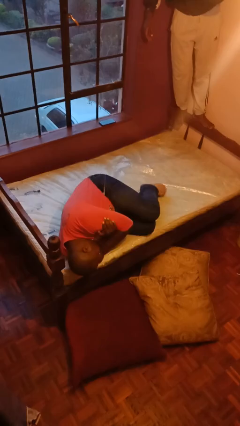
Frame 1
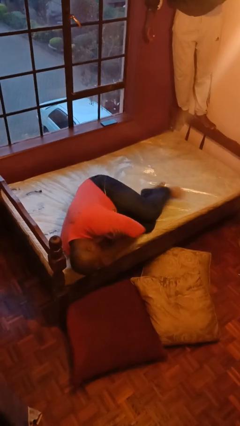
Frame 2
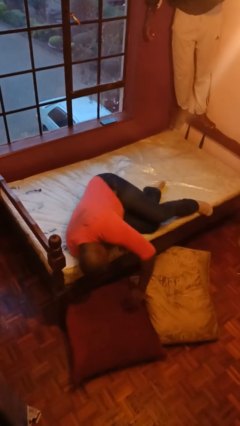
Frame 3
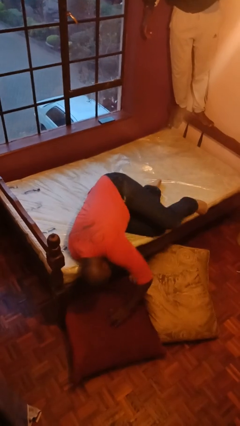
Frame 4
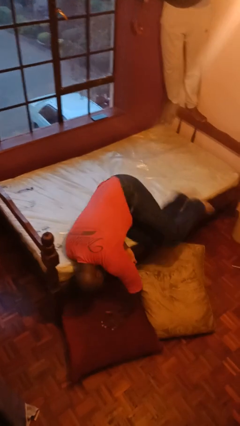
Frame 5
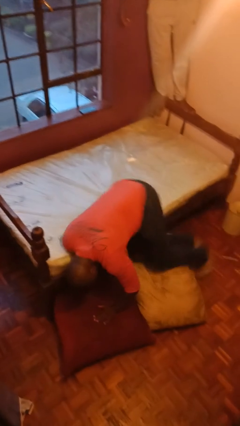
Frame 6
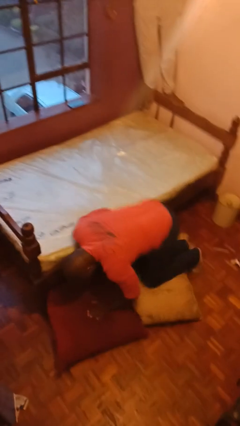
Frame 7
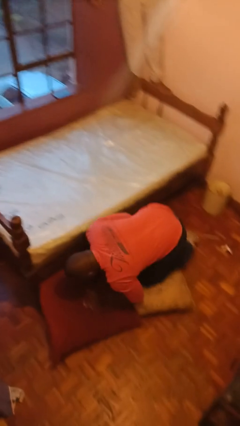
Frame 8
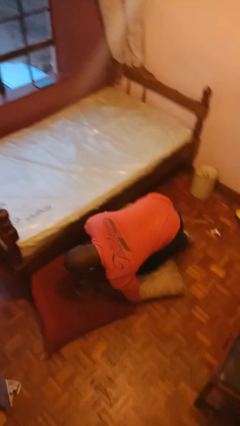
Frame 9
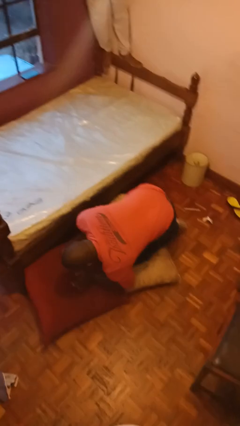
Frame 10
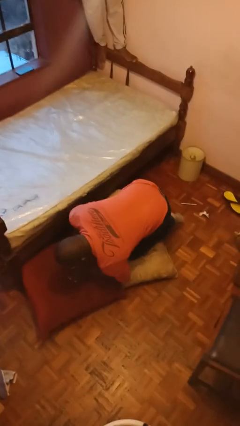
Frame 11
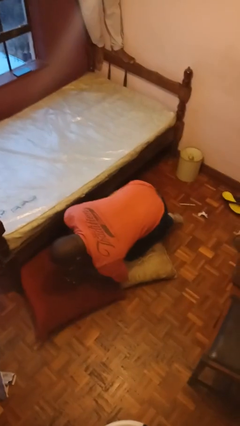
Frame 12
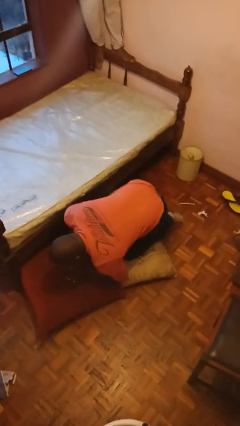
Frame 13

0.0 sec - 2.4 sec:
person falls from bed

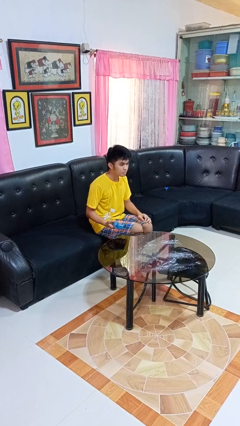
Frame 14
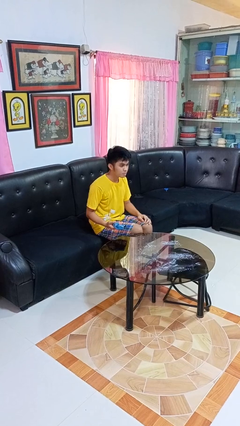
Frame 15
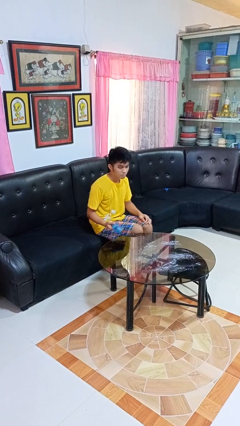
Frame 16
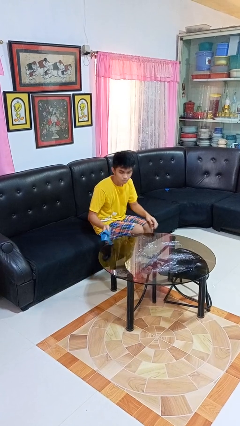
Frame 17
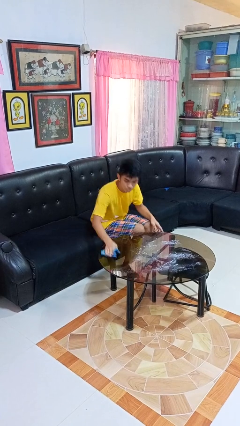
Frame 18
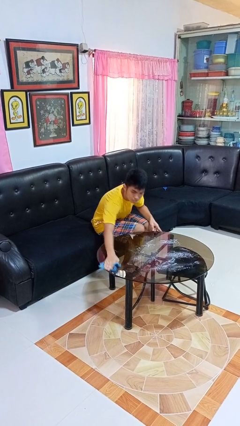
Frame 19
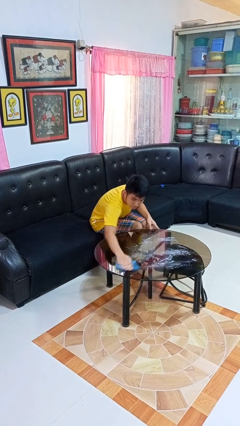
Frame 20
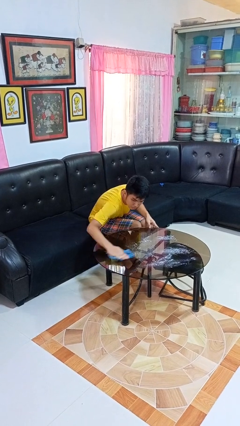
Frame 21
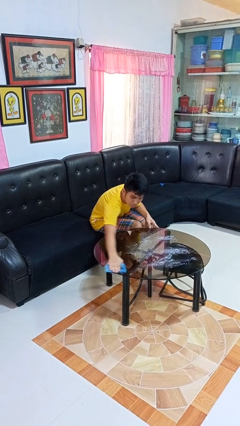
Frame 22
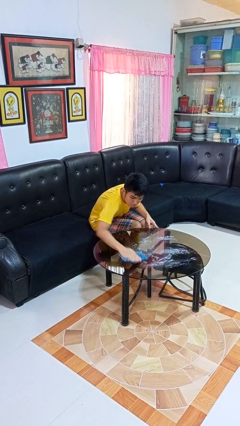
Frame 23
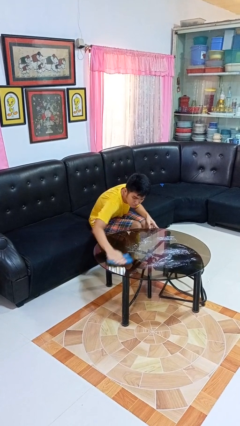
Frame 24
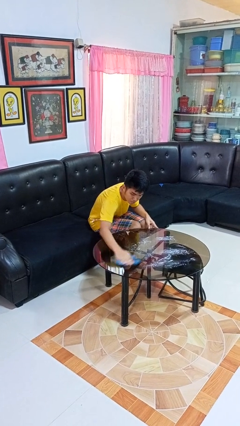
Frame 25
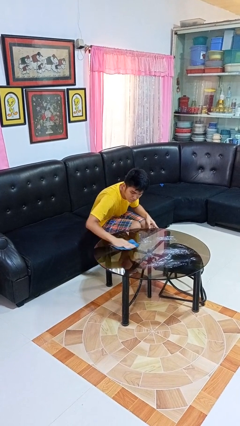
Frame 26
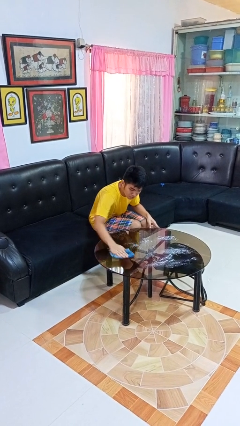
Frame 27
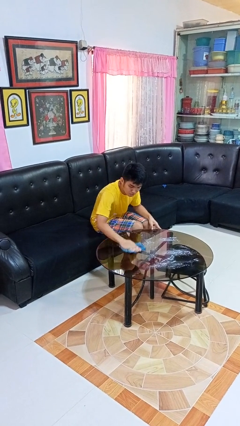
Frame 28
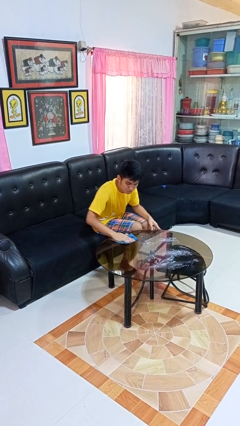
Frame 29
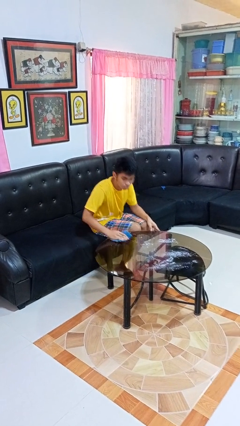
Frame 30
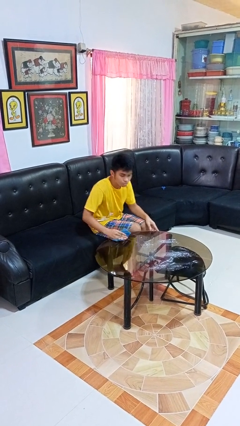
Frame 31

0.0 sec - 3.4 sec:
person cleans table with rag

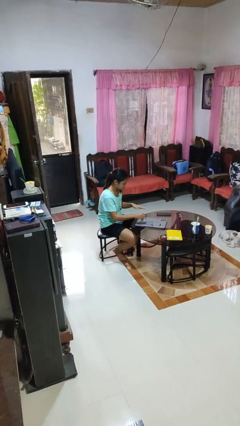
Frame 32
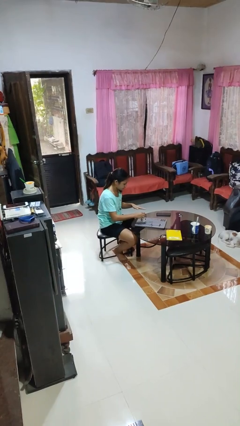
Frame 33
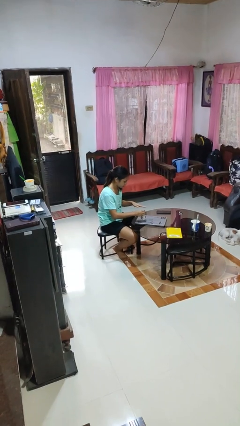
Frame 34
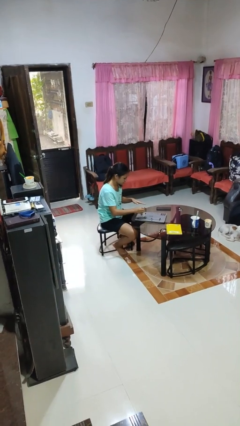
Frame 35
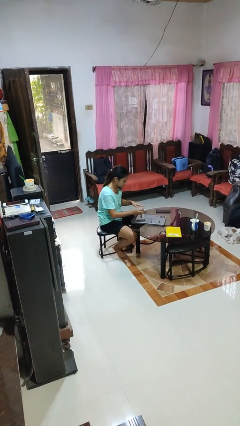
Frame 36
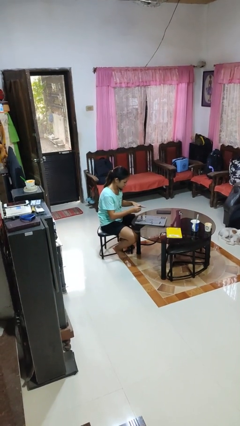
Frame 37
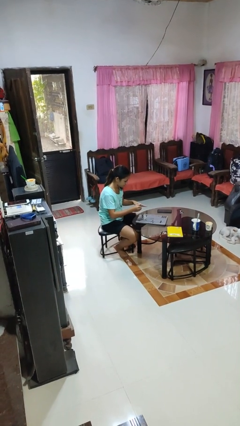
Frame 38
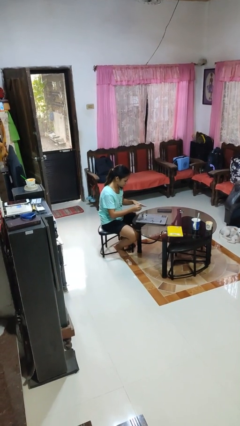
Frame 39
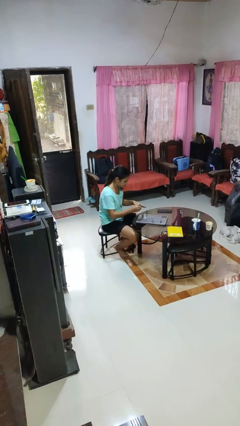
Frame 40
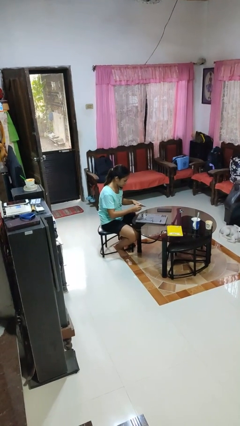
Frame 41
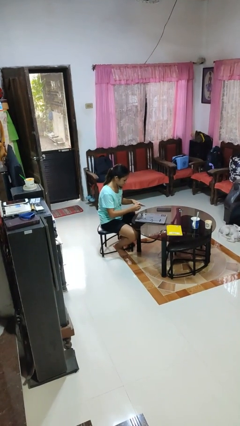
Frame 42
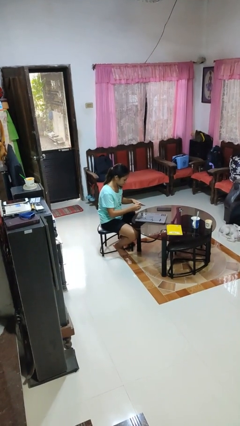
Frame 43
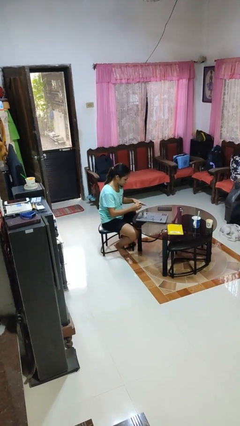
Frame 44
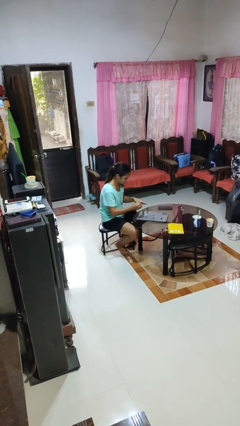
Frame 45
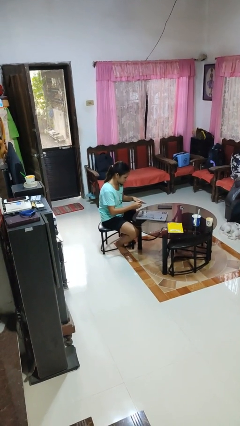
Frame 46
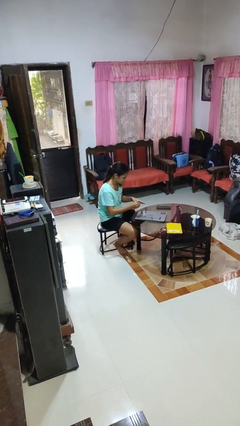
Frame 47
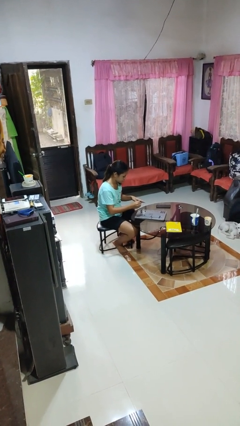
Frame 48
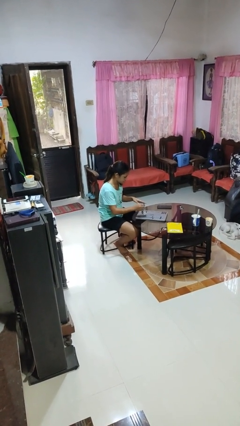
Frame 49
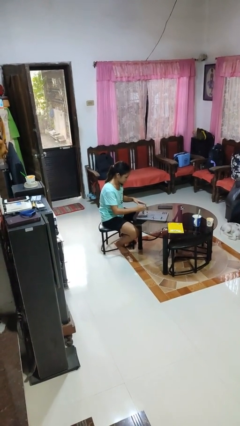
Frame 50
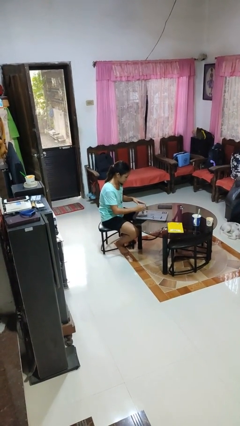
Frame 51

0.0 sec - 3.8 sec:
person paints fingernails

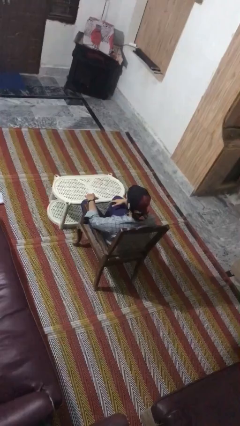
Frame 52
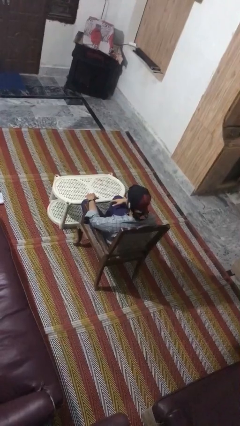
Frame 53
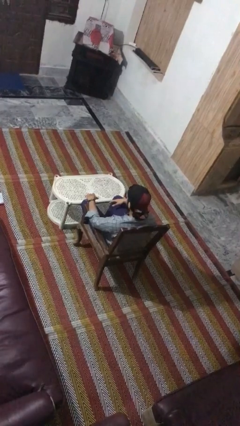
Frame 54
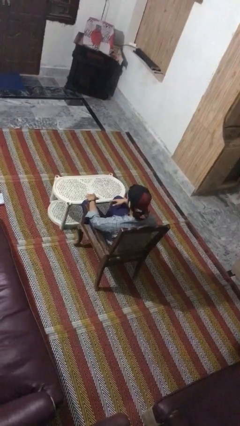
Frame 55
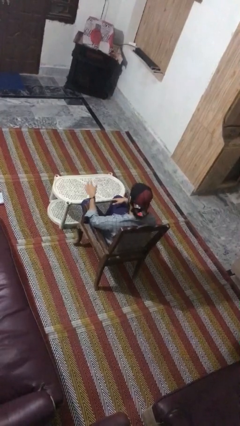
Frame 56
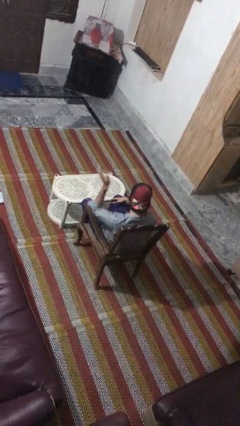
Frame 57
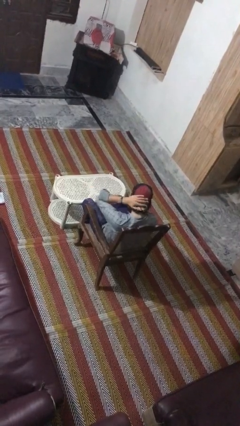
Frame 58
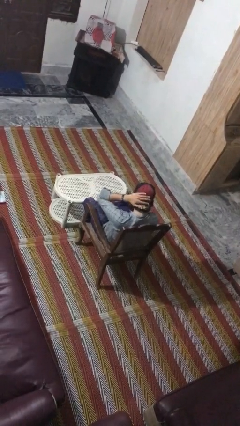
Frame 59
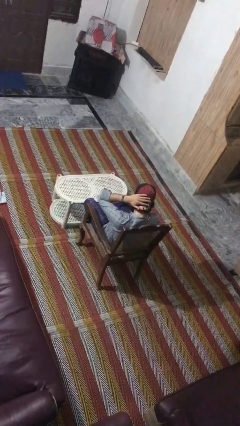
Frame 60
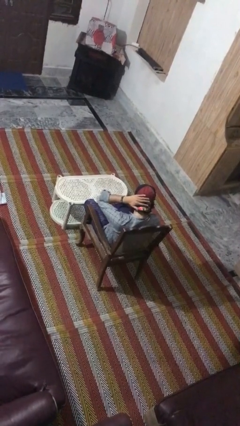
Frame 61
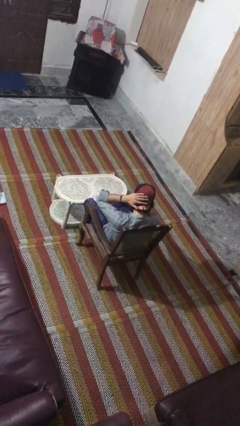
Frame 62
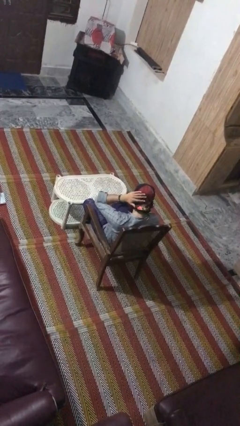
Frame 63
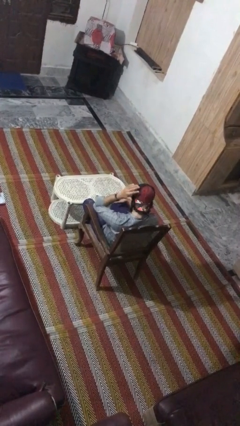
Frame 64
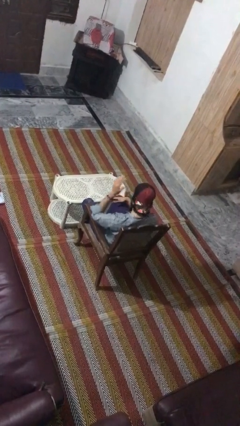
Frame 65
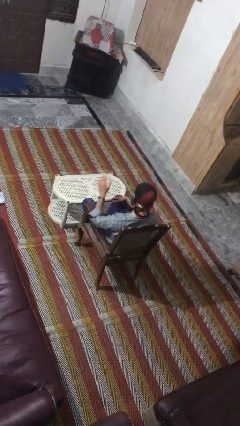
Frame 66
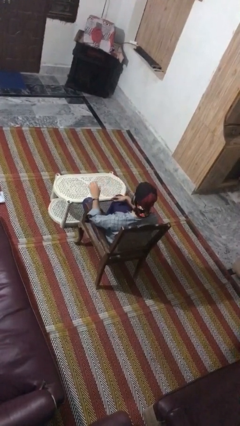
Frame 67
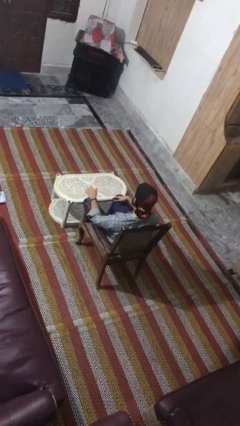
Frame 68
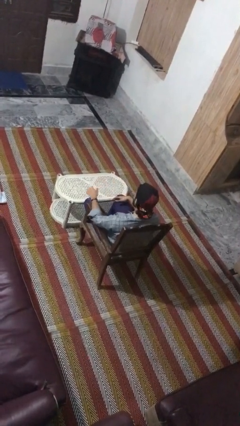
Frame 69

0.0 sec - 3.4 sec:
person swats bug

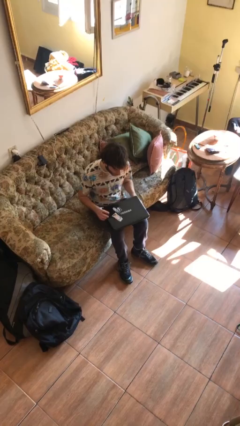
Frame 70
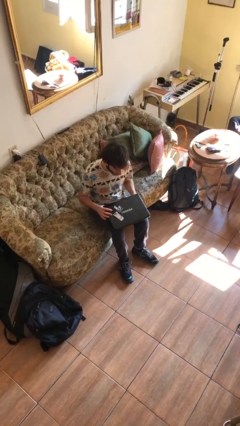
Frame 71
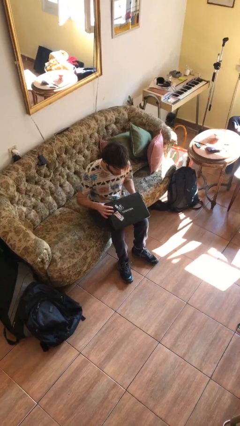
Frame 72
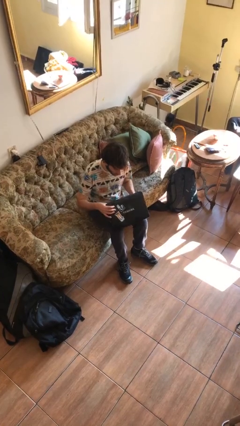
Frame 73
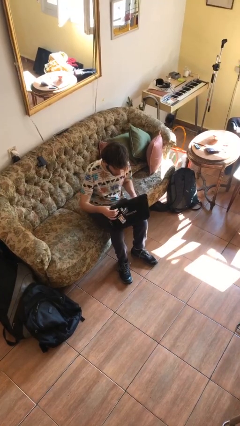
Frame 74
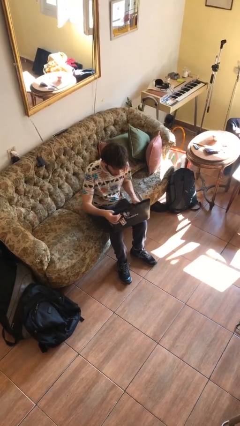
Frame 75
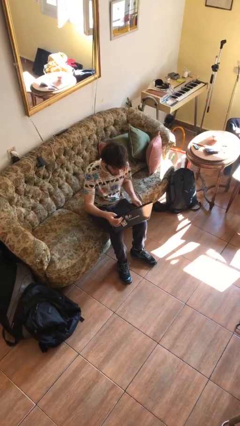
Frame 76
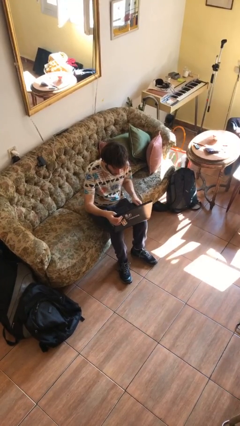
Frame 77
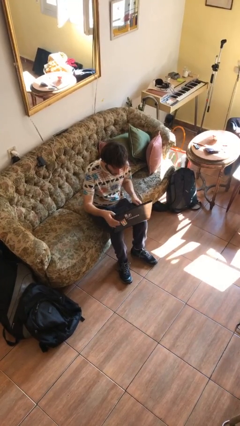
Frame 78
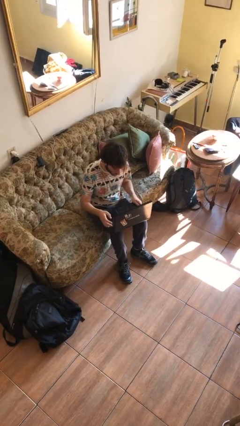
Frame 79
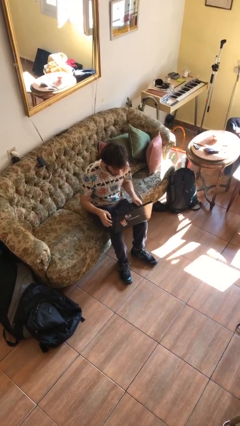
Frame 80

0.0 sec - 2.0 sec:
person opens laptop

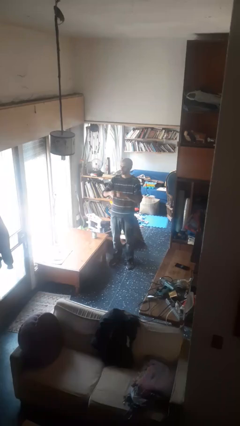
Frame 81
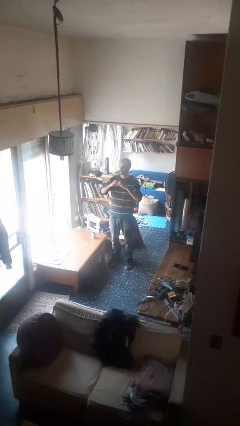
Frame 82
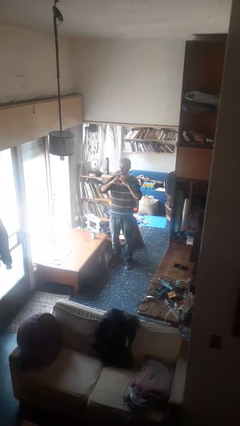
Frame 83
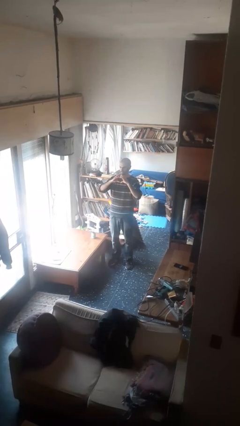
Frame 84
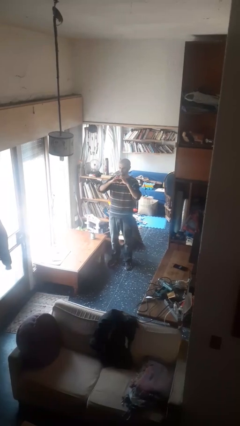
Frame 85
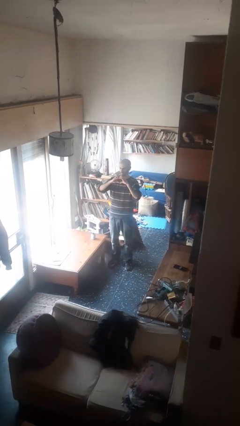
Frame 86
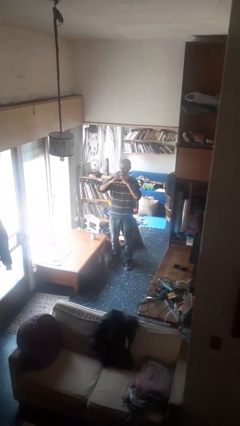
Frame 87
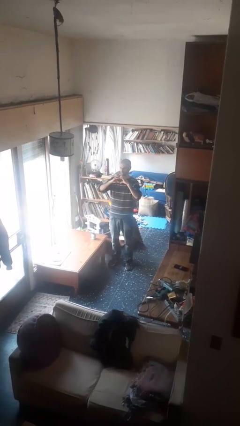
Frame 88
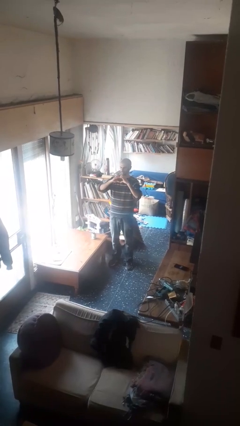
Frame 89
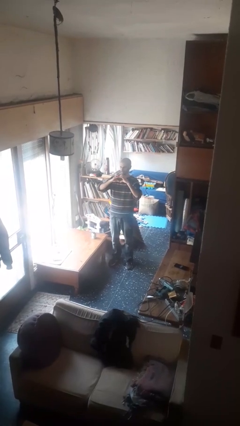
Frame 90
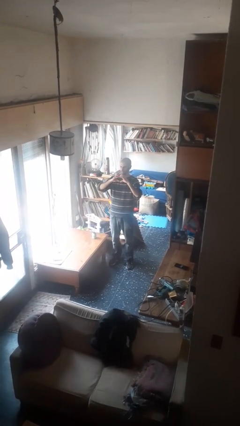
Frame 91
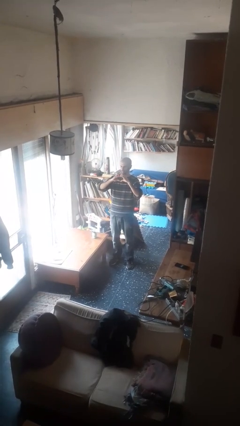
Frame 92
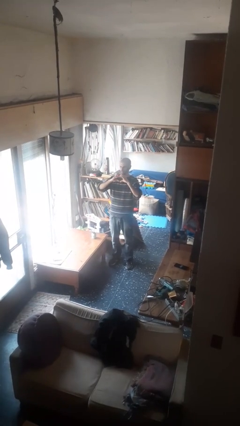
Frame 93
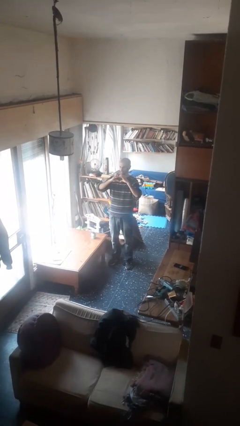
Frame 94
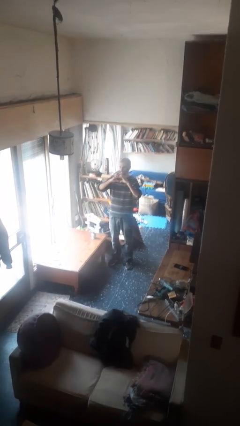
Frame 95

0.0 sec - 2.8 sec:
person gestures heart
